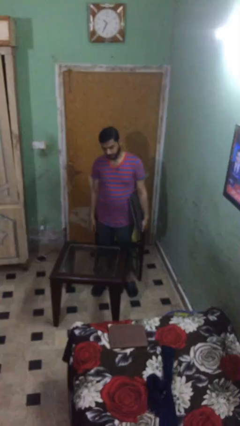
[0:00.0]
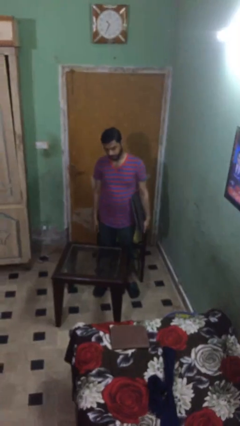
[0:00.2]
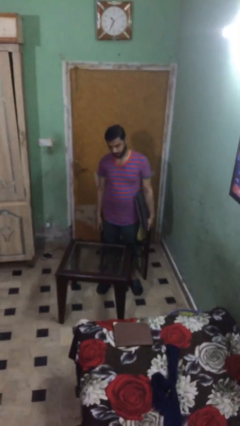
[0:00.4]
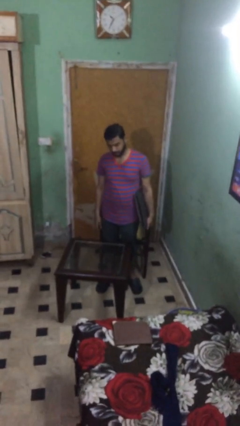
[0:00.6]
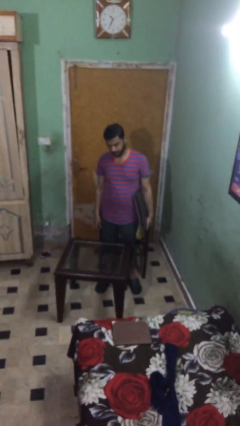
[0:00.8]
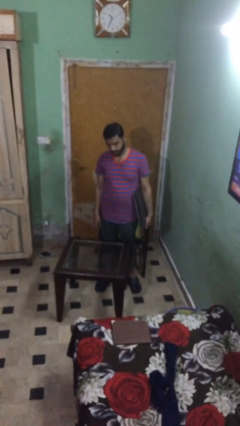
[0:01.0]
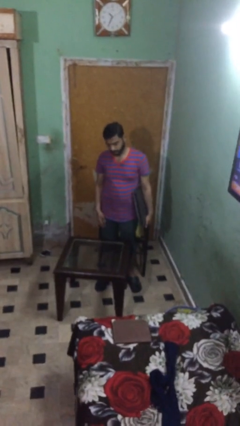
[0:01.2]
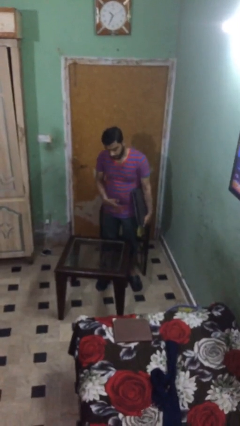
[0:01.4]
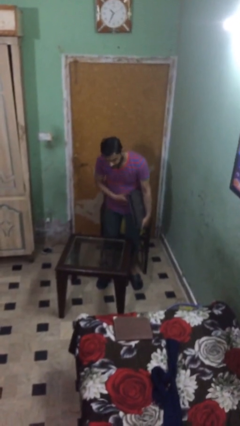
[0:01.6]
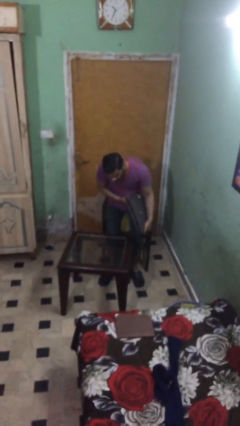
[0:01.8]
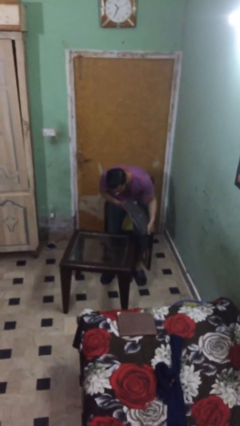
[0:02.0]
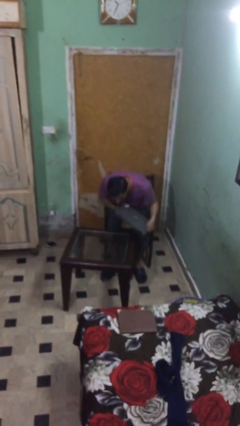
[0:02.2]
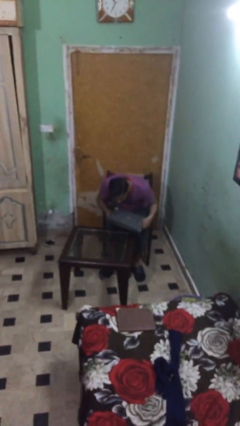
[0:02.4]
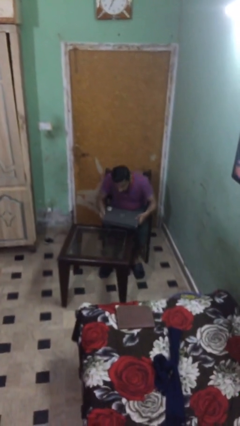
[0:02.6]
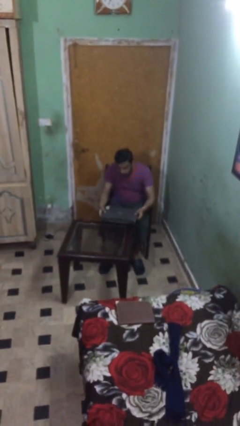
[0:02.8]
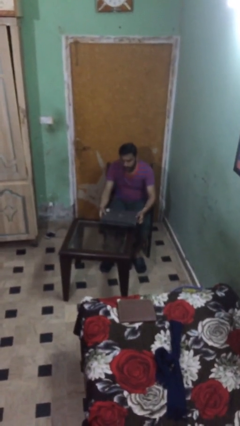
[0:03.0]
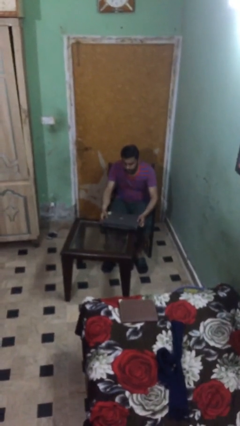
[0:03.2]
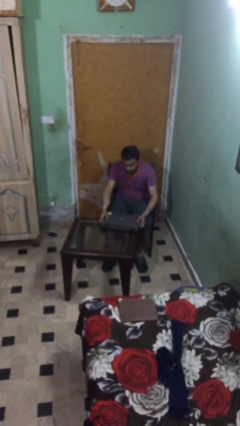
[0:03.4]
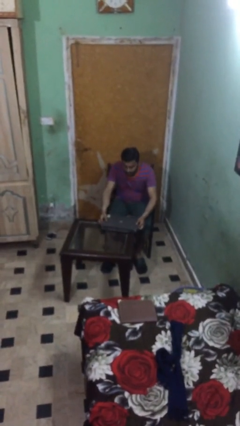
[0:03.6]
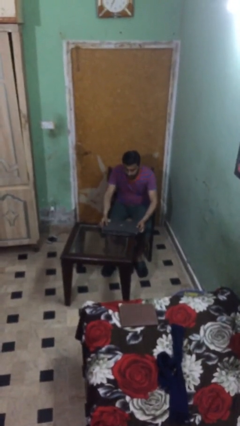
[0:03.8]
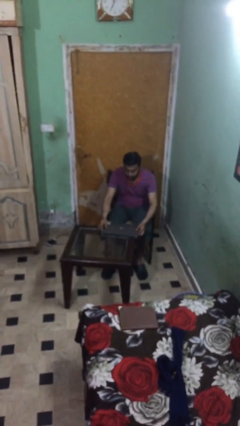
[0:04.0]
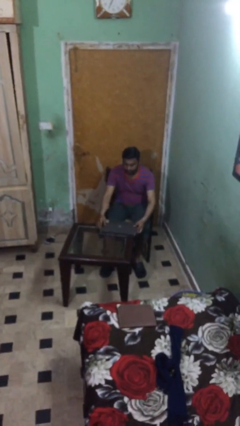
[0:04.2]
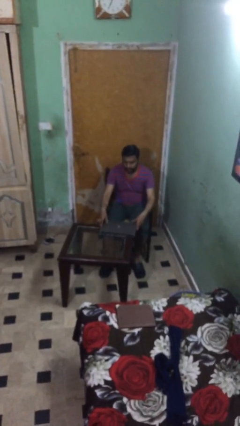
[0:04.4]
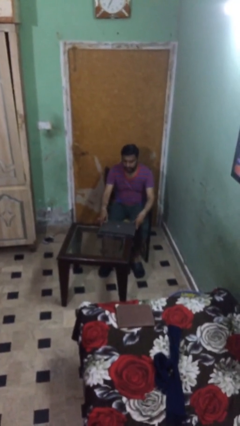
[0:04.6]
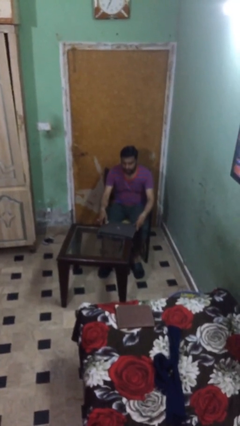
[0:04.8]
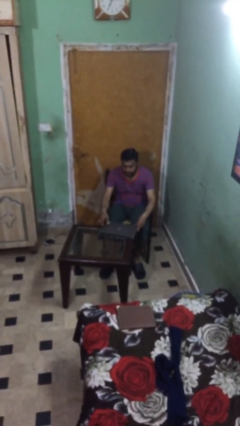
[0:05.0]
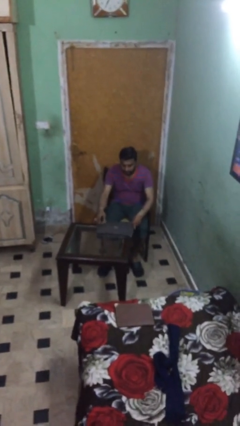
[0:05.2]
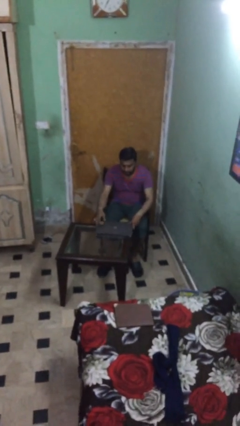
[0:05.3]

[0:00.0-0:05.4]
person sits down

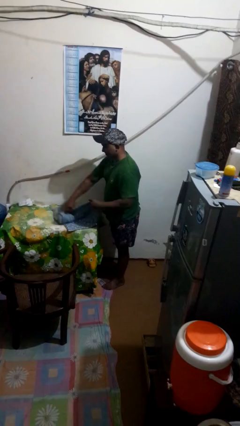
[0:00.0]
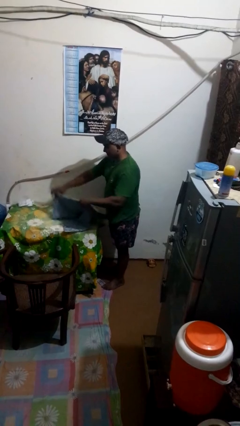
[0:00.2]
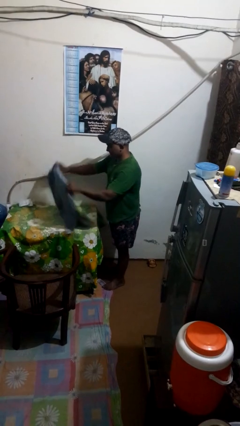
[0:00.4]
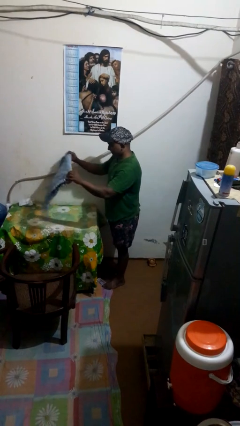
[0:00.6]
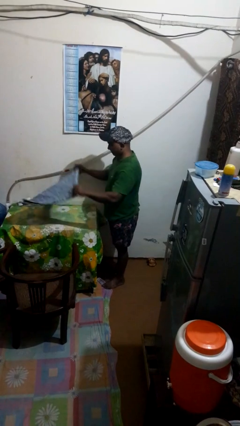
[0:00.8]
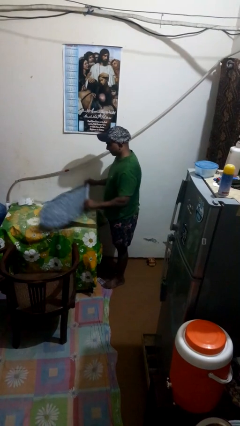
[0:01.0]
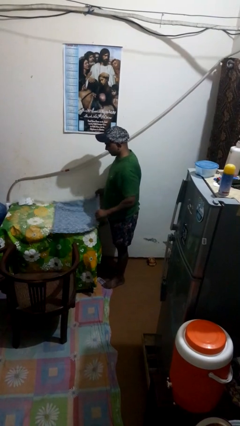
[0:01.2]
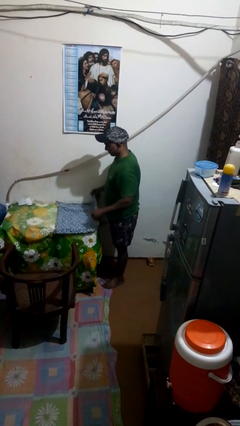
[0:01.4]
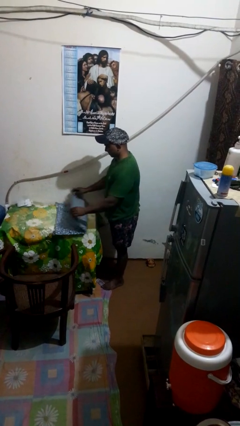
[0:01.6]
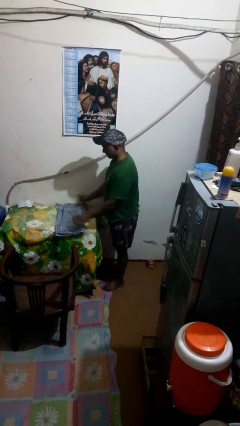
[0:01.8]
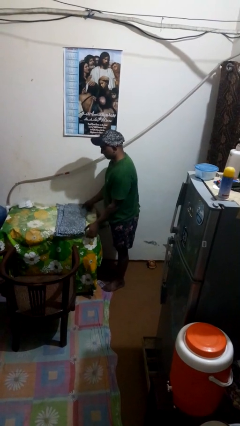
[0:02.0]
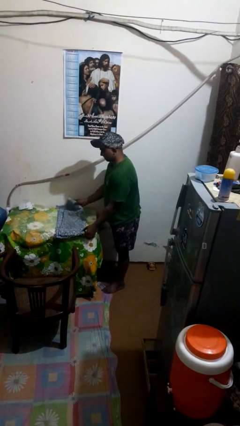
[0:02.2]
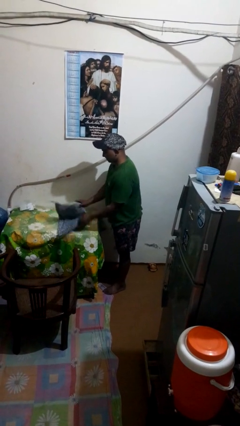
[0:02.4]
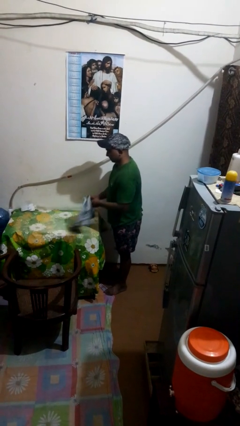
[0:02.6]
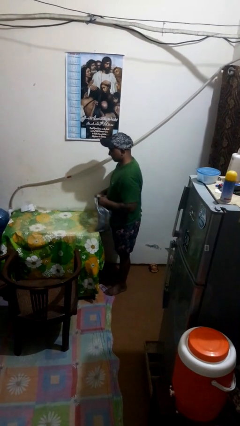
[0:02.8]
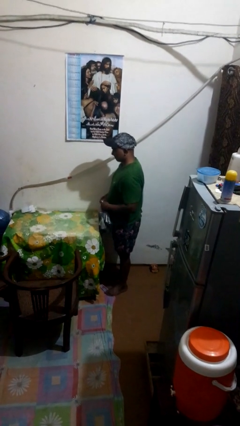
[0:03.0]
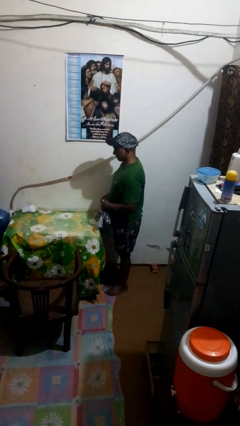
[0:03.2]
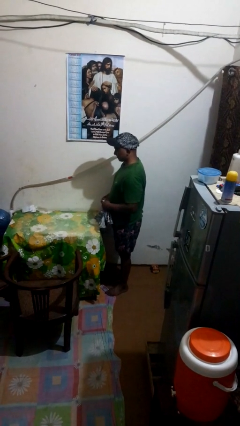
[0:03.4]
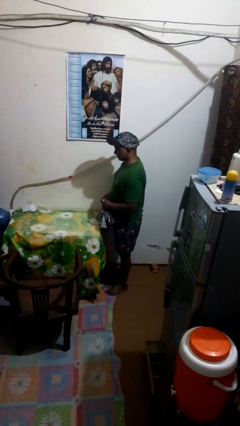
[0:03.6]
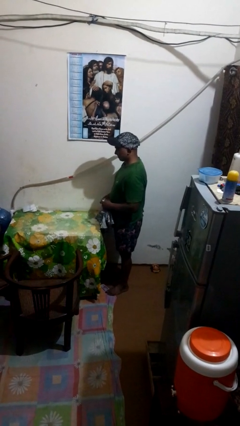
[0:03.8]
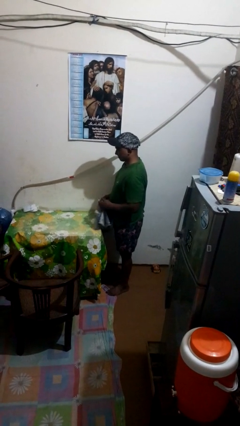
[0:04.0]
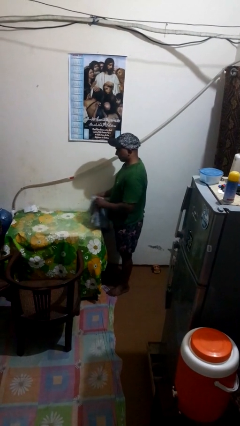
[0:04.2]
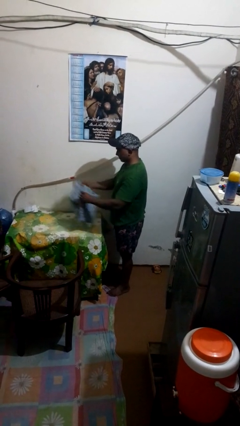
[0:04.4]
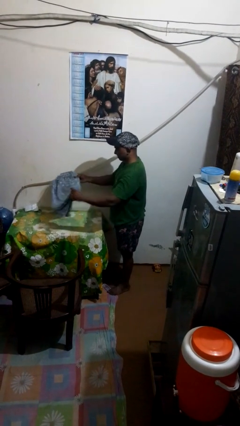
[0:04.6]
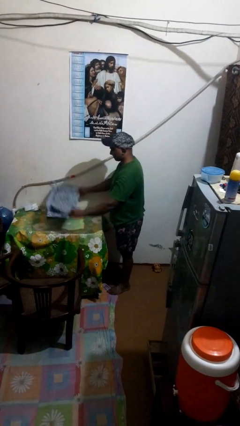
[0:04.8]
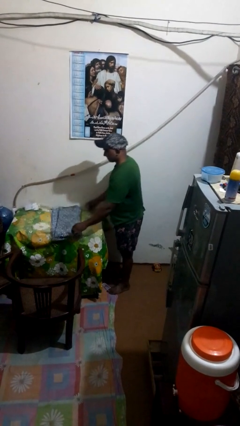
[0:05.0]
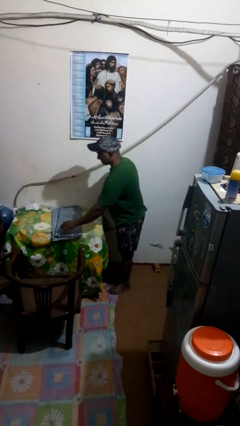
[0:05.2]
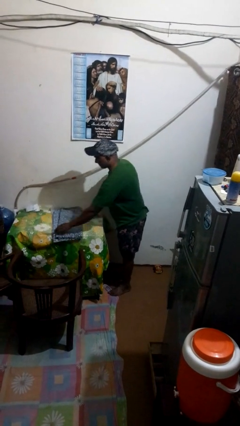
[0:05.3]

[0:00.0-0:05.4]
person folds tablecloth

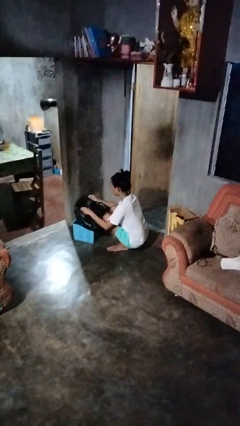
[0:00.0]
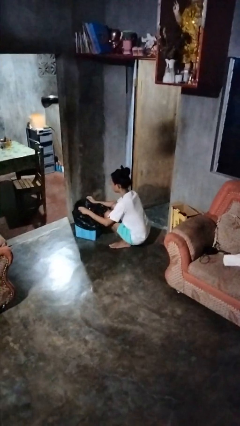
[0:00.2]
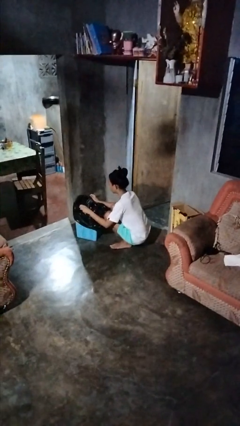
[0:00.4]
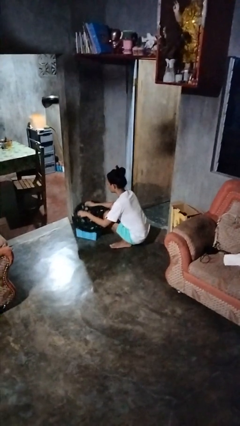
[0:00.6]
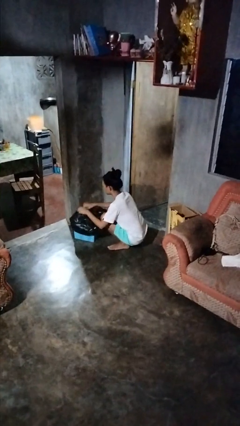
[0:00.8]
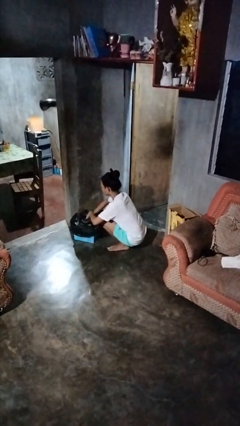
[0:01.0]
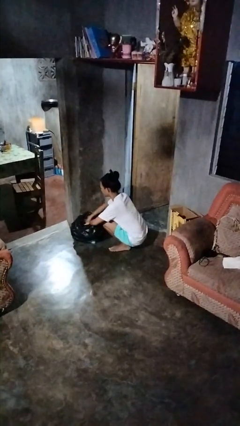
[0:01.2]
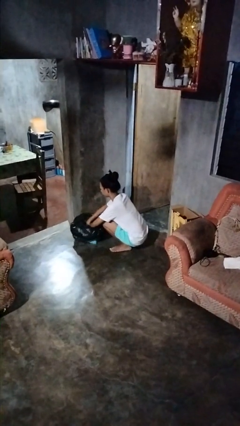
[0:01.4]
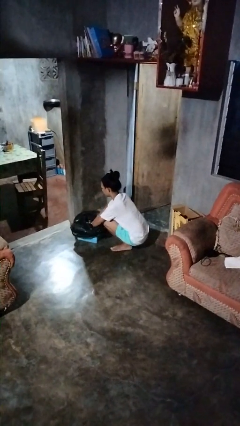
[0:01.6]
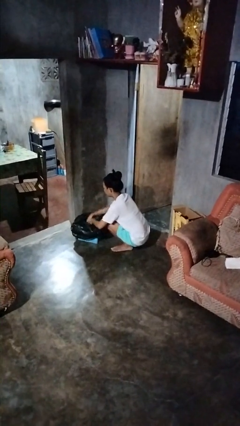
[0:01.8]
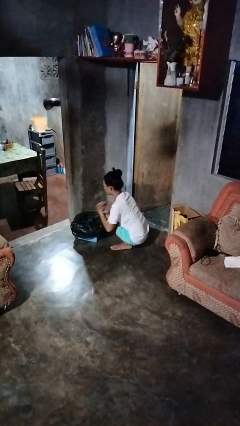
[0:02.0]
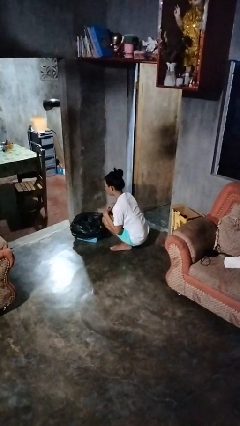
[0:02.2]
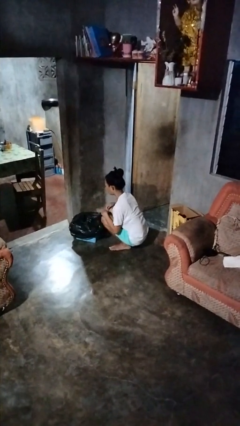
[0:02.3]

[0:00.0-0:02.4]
person inserts trashbag into trashcan

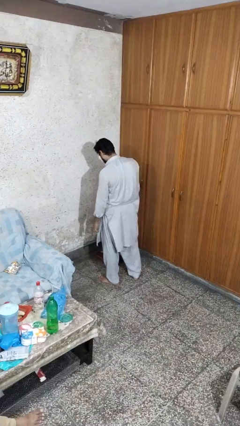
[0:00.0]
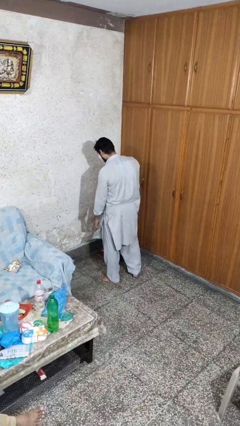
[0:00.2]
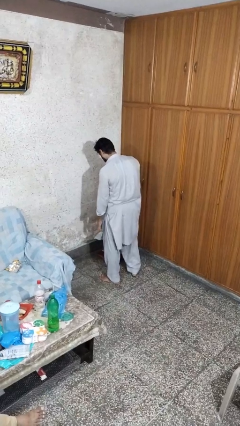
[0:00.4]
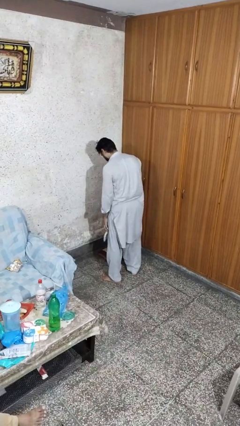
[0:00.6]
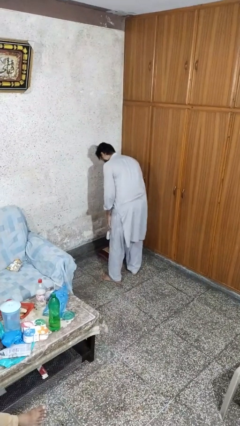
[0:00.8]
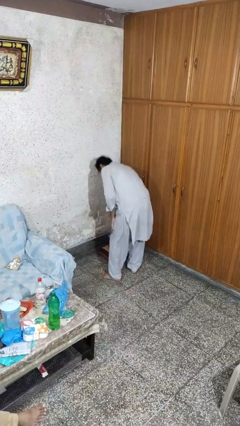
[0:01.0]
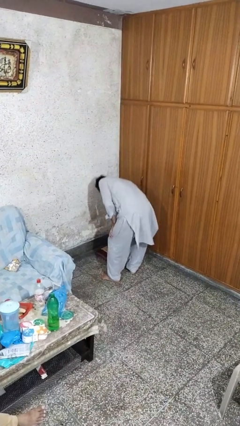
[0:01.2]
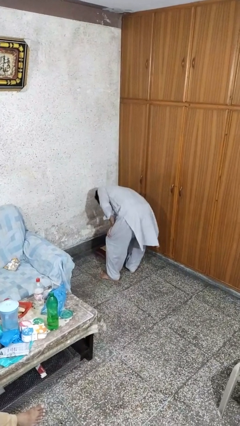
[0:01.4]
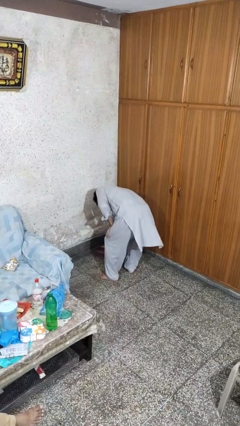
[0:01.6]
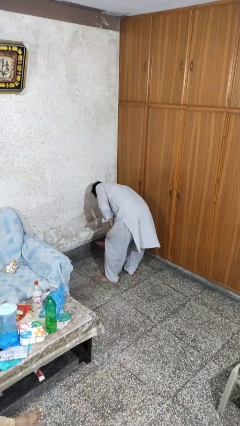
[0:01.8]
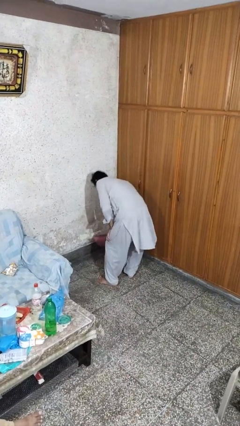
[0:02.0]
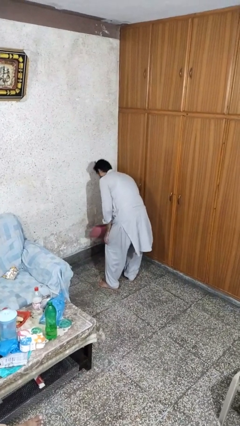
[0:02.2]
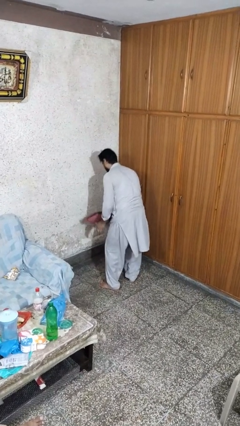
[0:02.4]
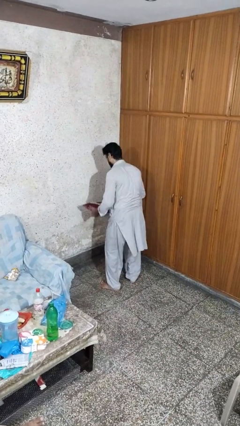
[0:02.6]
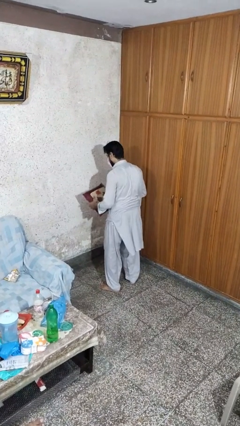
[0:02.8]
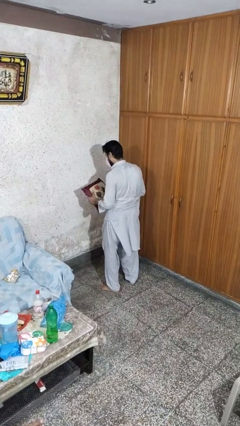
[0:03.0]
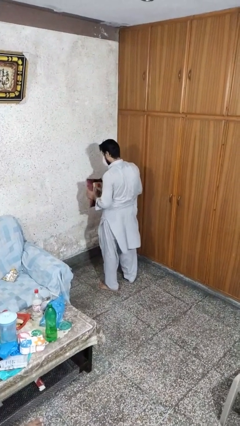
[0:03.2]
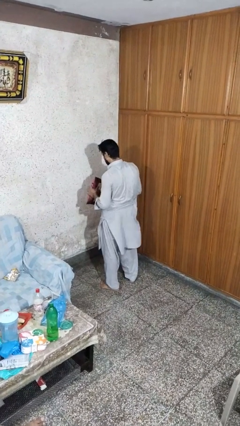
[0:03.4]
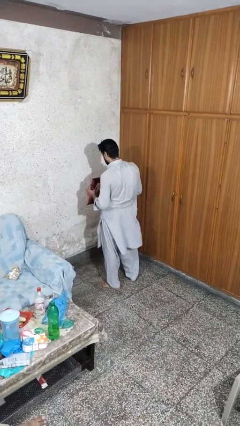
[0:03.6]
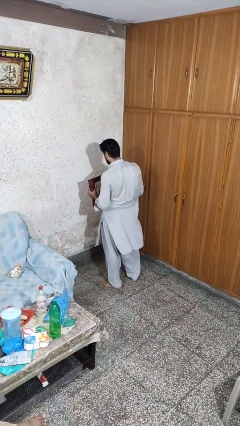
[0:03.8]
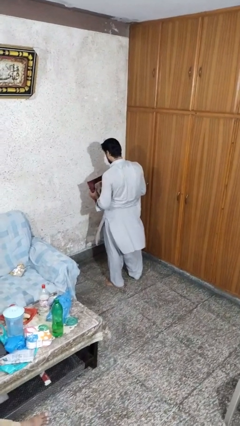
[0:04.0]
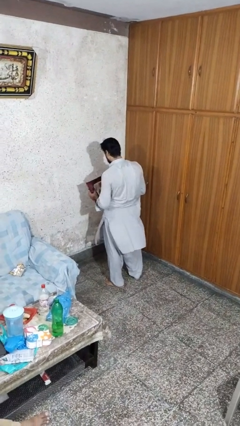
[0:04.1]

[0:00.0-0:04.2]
person picks up object from floor

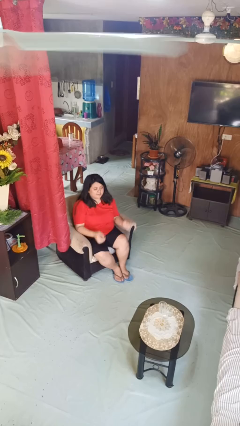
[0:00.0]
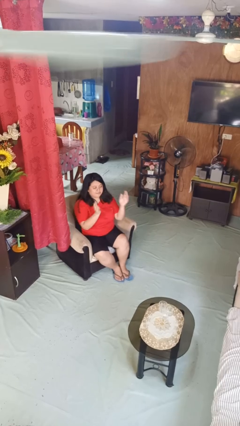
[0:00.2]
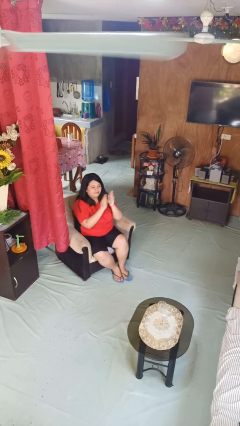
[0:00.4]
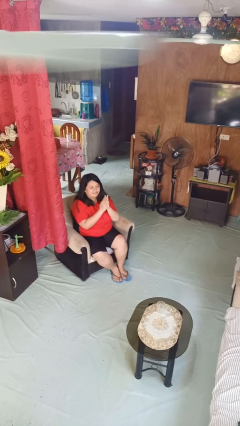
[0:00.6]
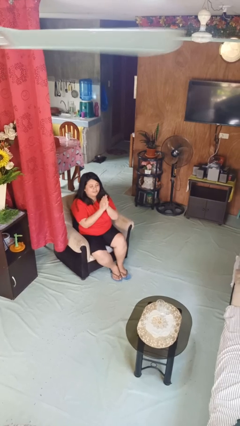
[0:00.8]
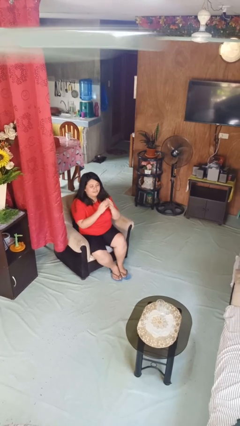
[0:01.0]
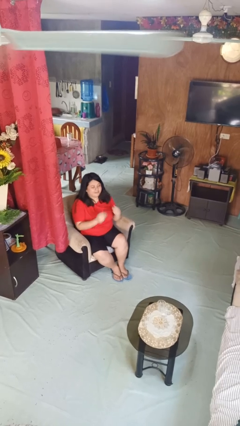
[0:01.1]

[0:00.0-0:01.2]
person claps hands
